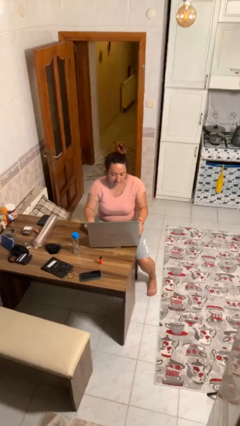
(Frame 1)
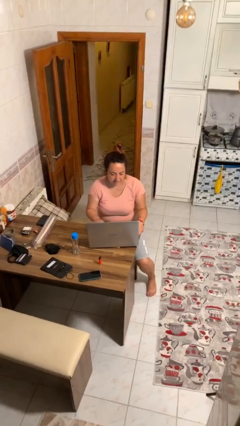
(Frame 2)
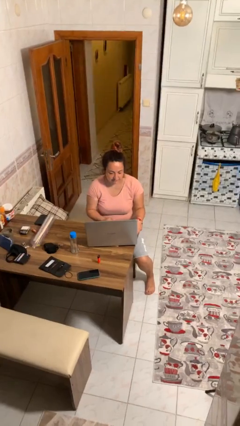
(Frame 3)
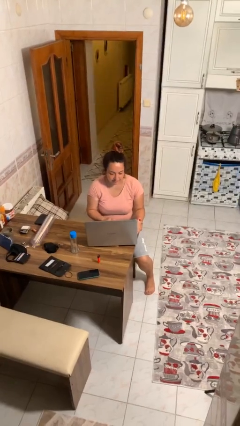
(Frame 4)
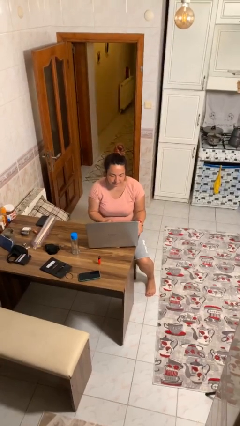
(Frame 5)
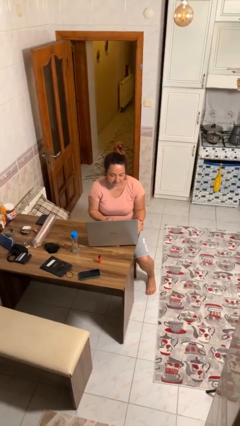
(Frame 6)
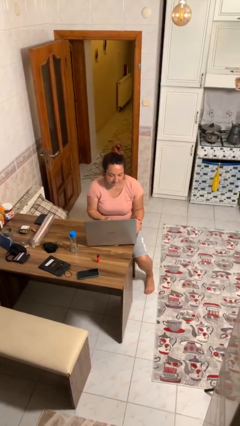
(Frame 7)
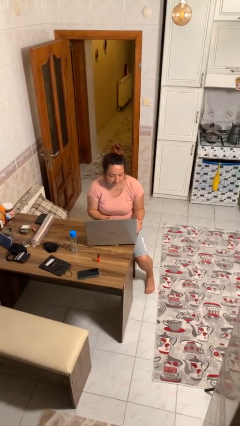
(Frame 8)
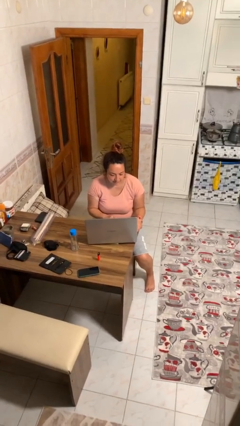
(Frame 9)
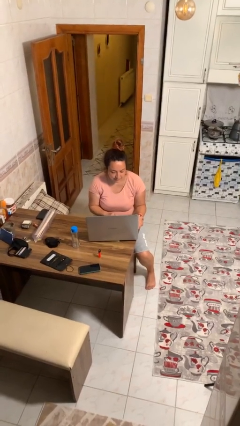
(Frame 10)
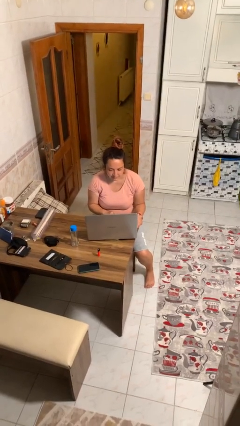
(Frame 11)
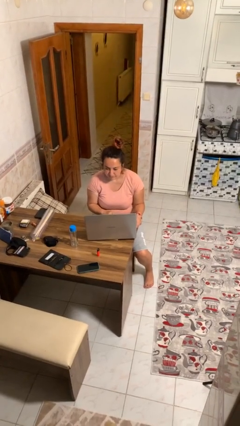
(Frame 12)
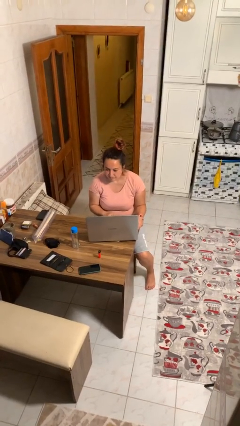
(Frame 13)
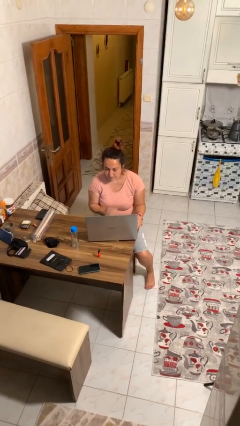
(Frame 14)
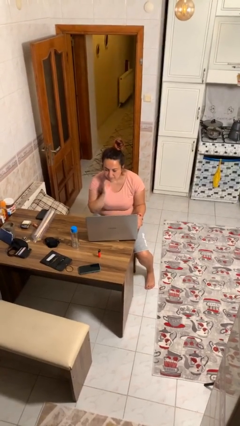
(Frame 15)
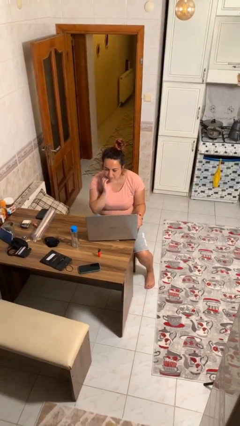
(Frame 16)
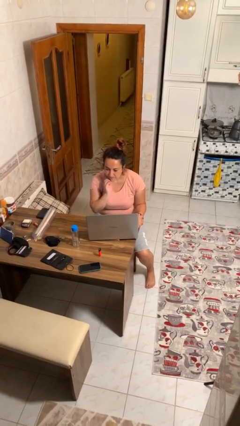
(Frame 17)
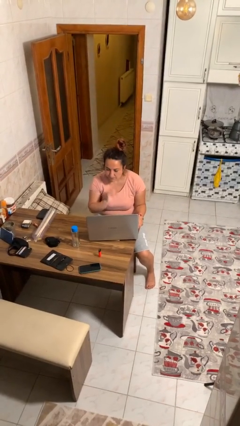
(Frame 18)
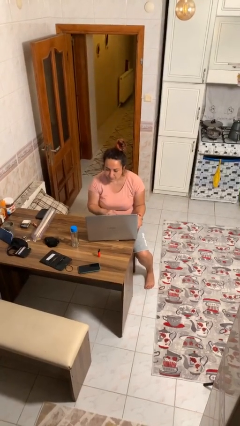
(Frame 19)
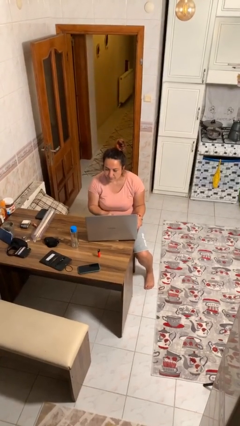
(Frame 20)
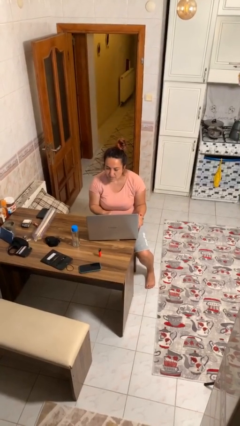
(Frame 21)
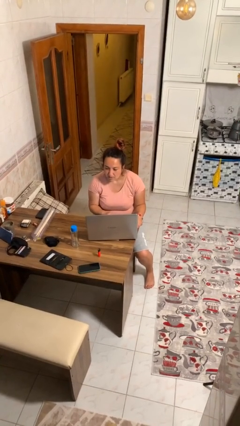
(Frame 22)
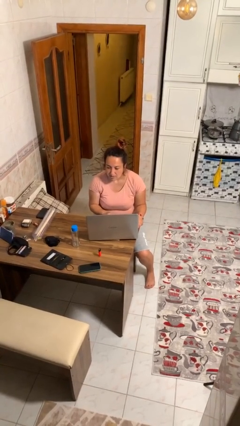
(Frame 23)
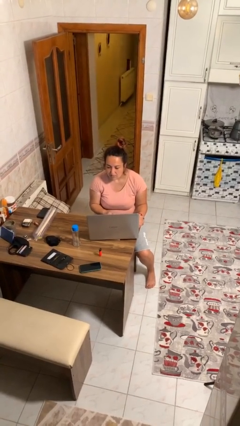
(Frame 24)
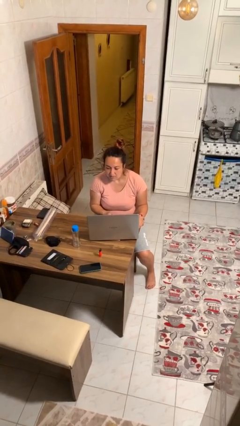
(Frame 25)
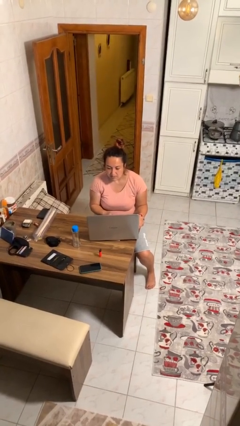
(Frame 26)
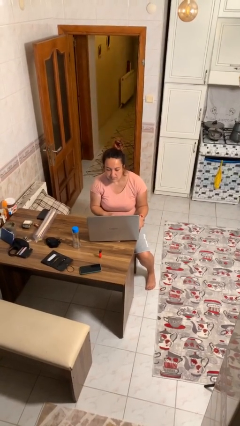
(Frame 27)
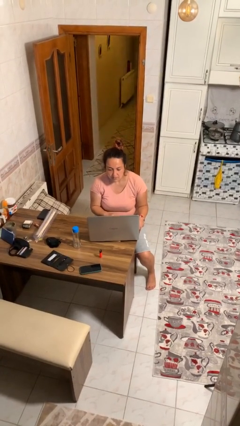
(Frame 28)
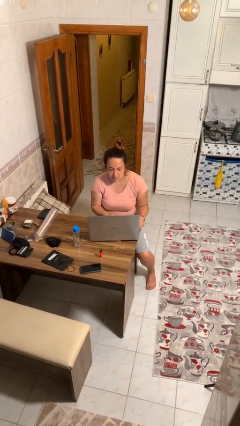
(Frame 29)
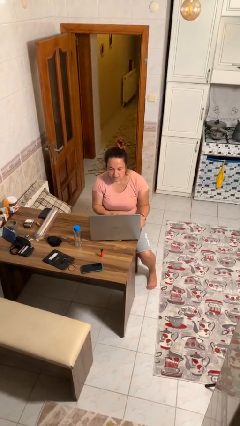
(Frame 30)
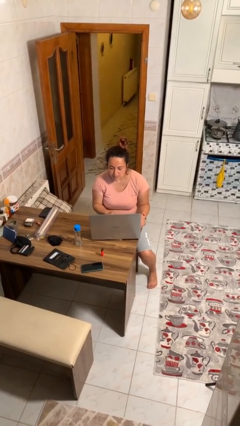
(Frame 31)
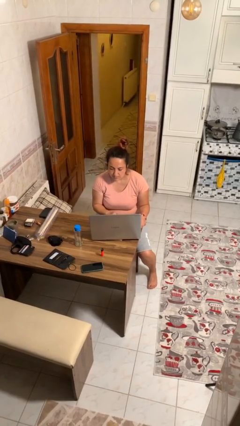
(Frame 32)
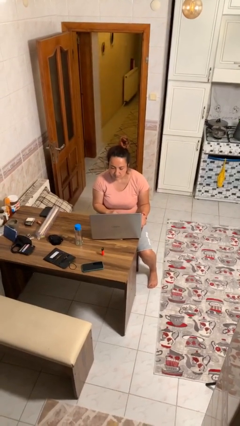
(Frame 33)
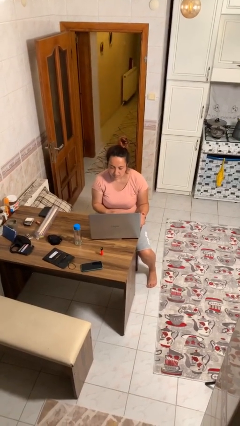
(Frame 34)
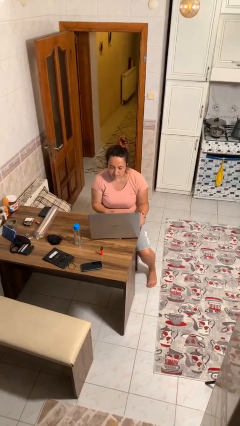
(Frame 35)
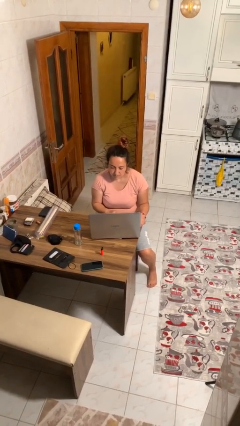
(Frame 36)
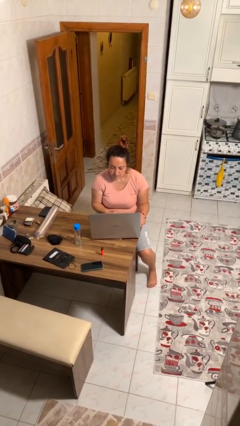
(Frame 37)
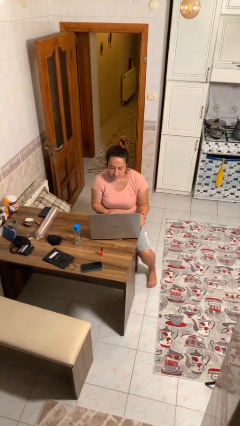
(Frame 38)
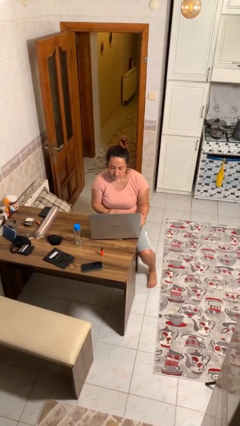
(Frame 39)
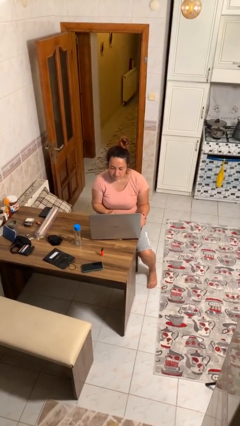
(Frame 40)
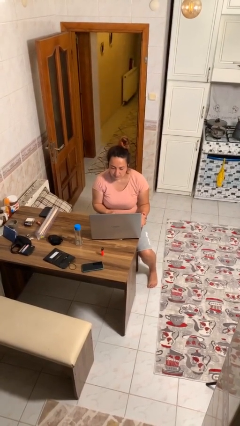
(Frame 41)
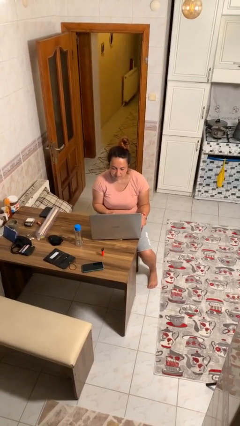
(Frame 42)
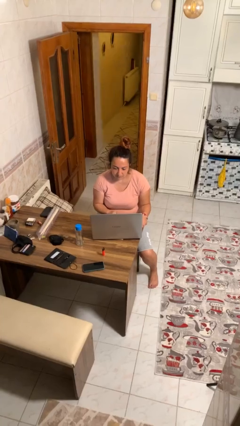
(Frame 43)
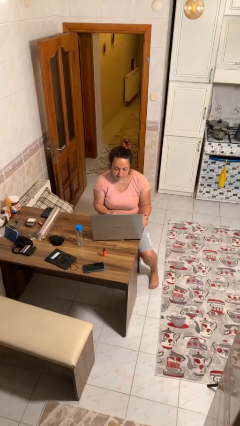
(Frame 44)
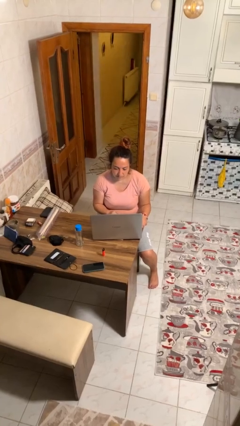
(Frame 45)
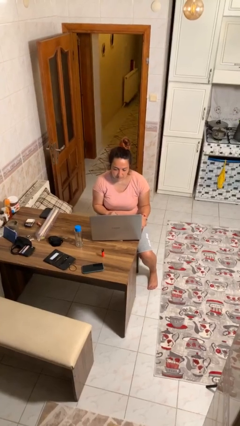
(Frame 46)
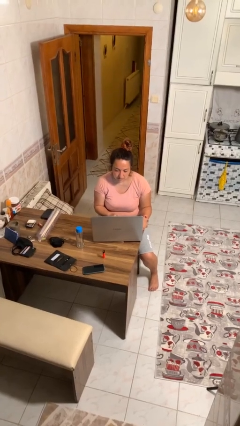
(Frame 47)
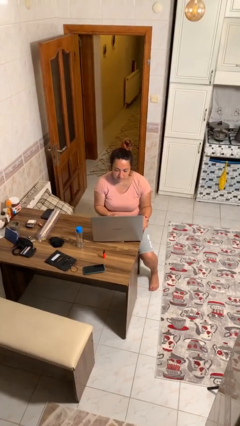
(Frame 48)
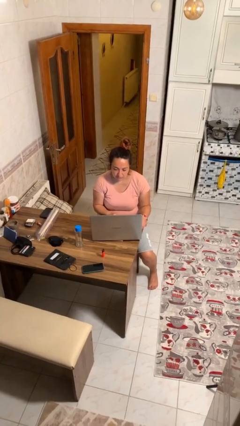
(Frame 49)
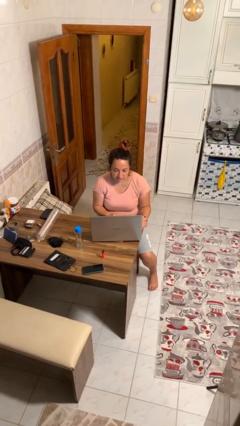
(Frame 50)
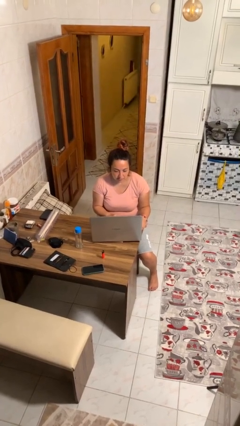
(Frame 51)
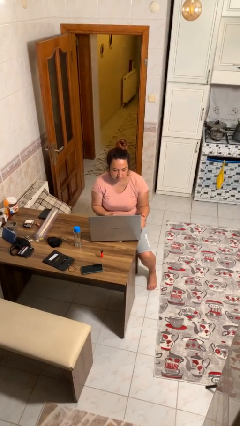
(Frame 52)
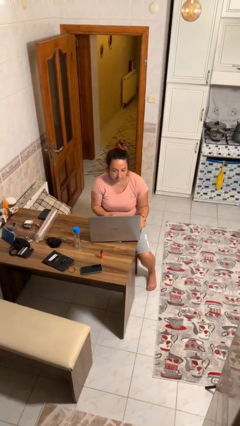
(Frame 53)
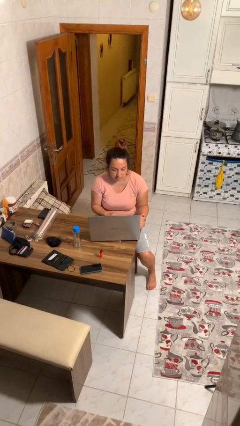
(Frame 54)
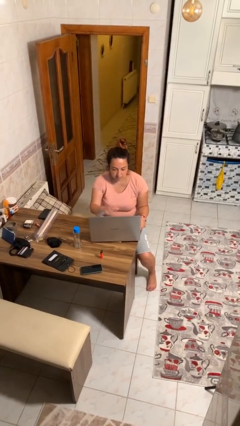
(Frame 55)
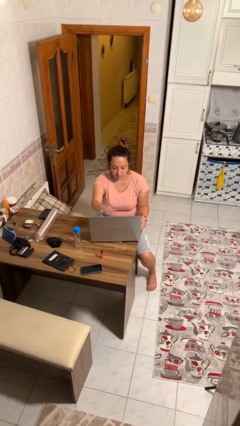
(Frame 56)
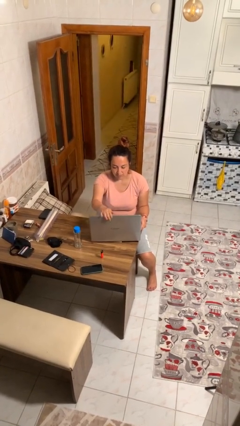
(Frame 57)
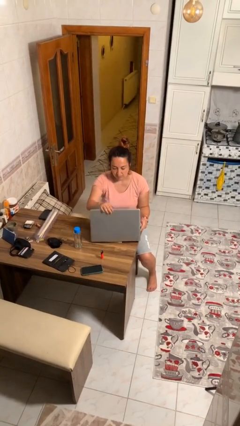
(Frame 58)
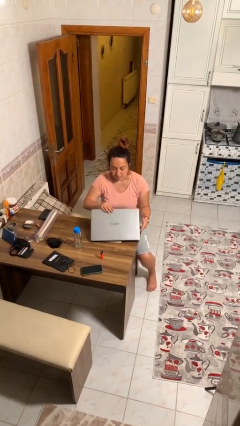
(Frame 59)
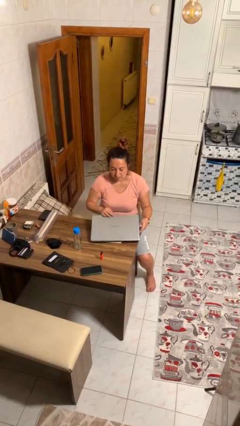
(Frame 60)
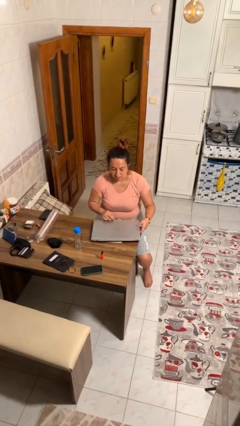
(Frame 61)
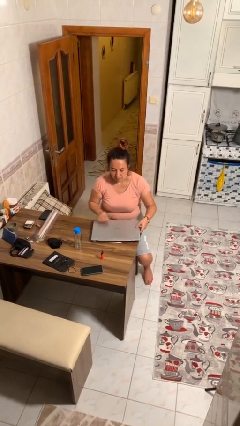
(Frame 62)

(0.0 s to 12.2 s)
person interacts with laptop

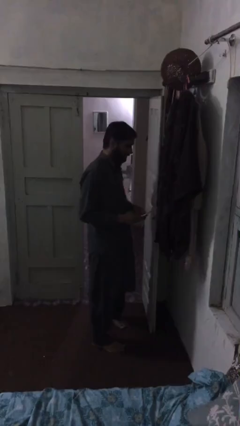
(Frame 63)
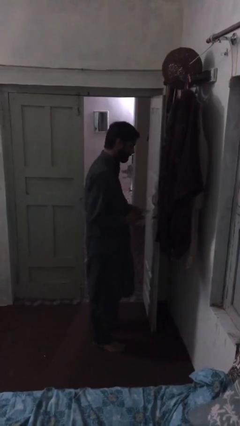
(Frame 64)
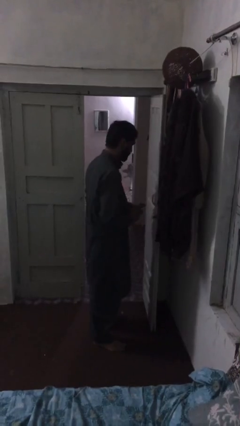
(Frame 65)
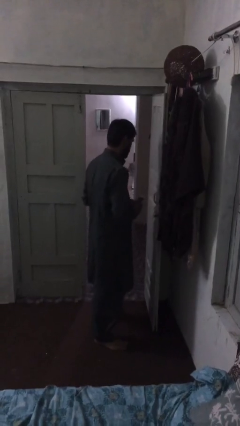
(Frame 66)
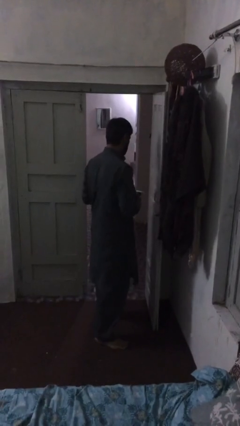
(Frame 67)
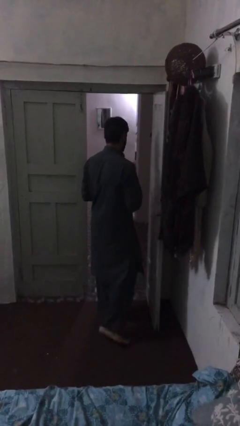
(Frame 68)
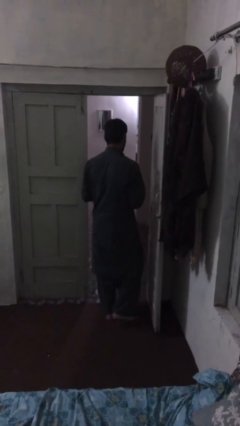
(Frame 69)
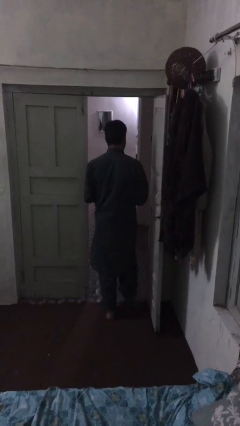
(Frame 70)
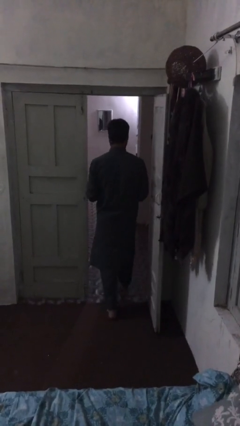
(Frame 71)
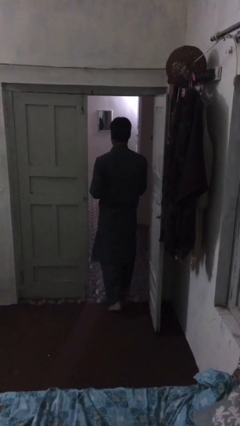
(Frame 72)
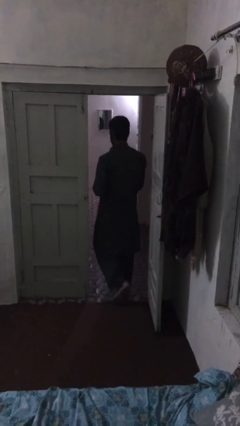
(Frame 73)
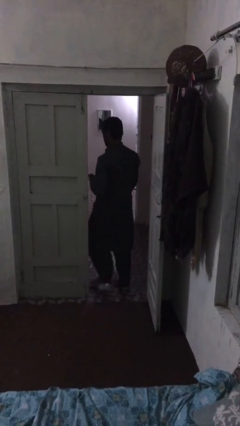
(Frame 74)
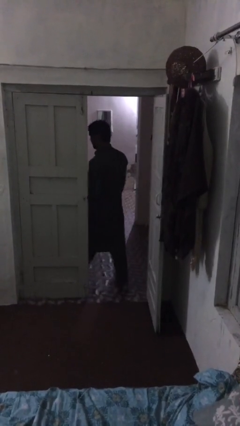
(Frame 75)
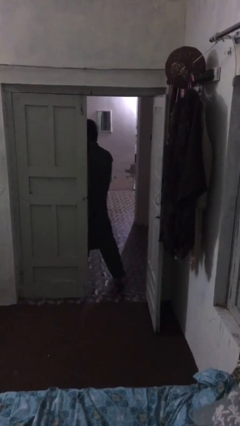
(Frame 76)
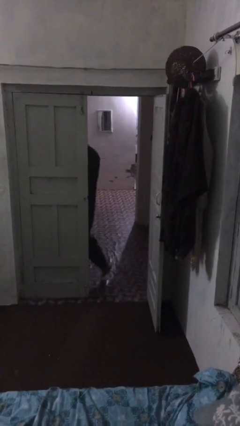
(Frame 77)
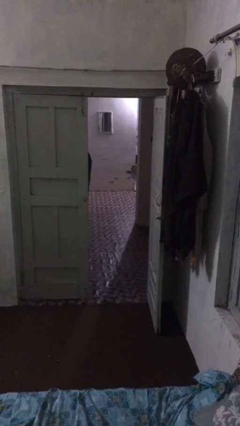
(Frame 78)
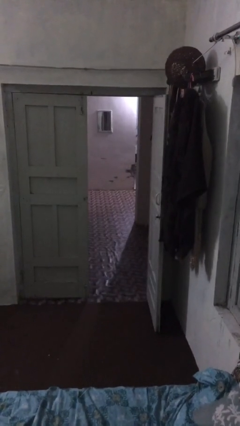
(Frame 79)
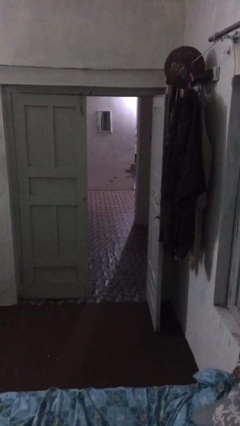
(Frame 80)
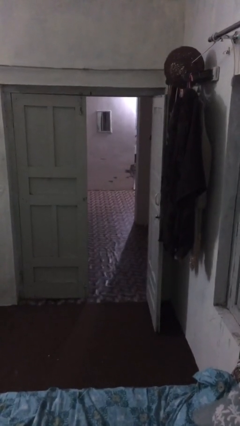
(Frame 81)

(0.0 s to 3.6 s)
person exits scene through structure

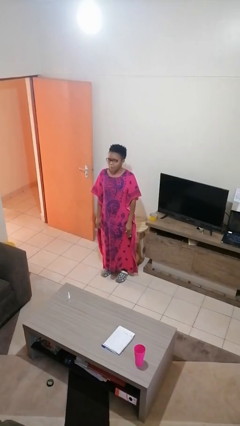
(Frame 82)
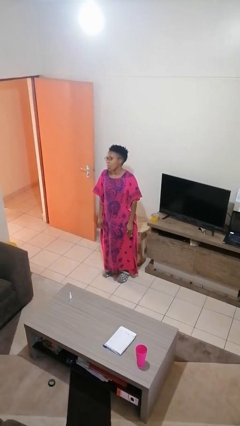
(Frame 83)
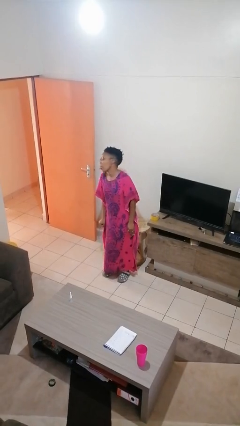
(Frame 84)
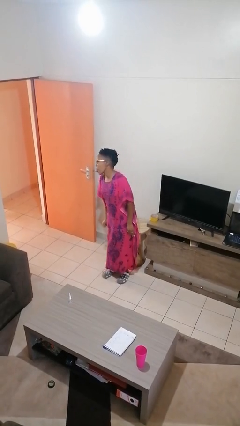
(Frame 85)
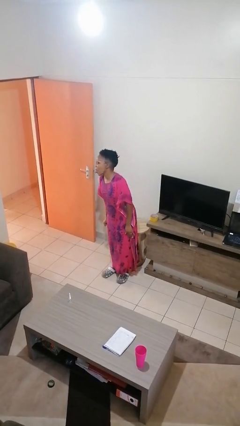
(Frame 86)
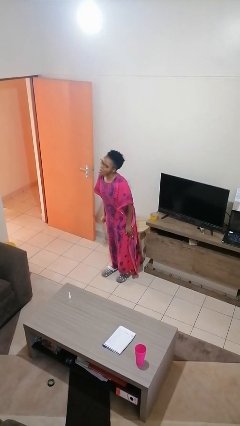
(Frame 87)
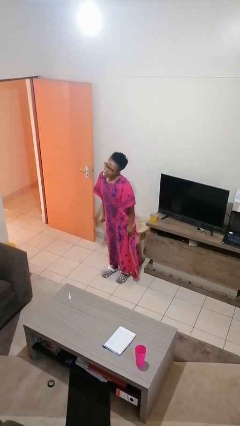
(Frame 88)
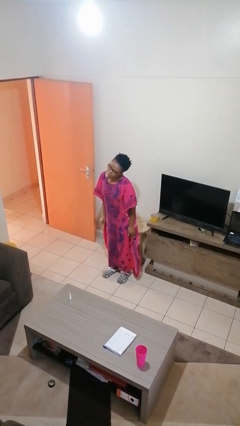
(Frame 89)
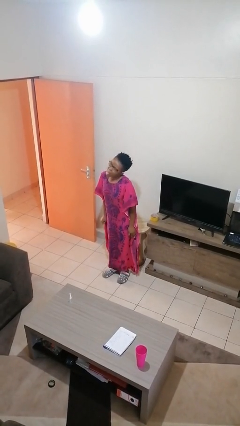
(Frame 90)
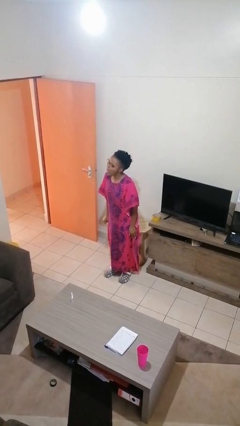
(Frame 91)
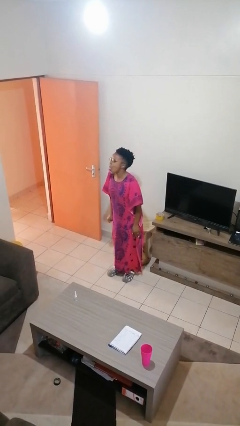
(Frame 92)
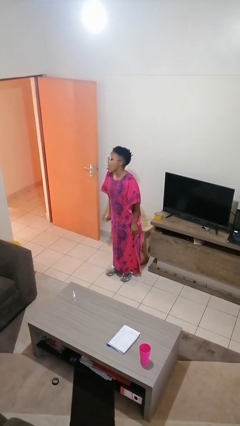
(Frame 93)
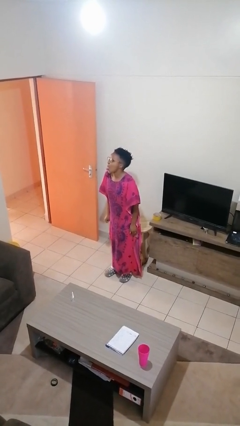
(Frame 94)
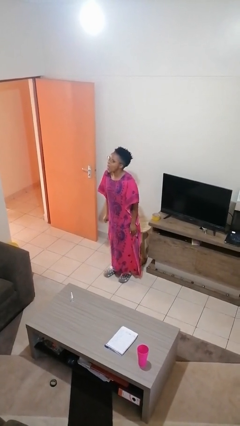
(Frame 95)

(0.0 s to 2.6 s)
person sticks out tongue
